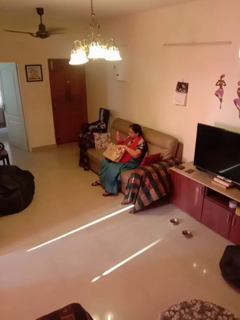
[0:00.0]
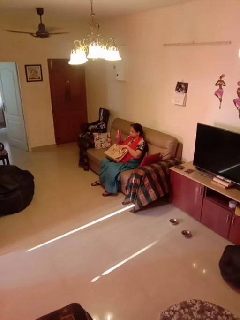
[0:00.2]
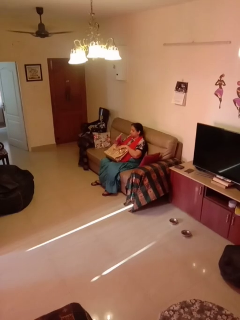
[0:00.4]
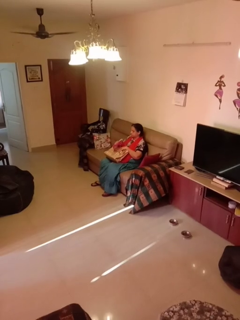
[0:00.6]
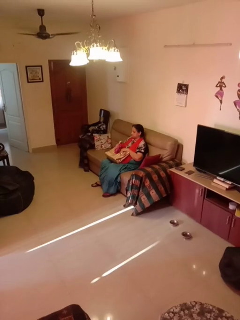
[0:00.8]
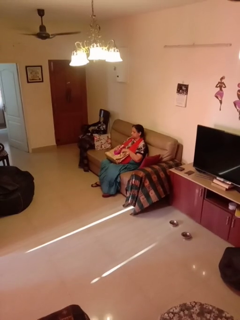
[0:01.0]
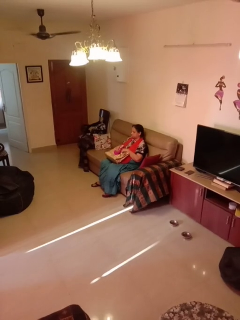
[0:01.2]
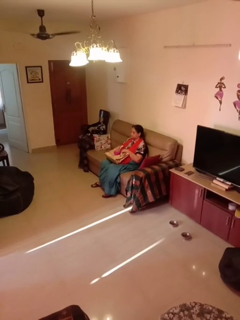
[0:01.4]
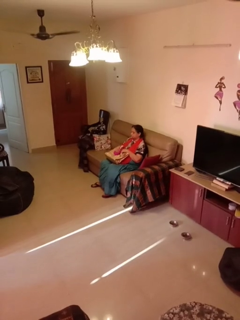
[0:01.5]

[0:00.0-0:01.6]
person takes object from purse

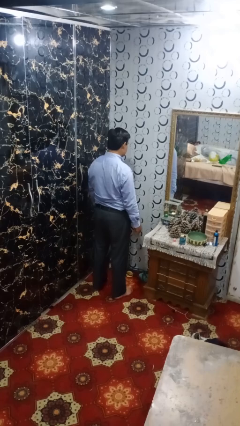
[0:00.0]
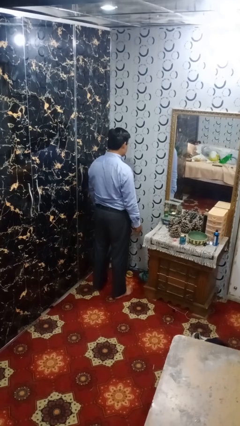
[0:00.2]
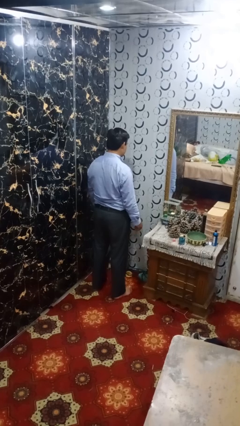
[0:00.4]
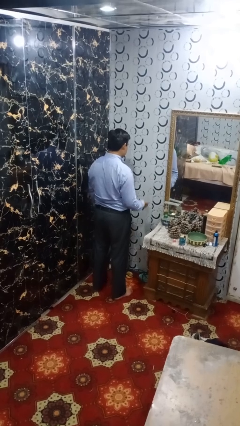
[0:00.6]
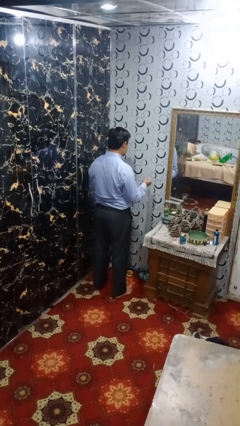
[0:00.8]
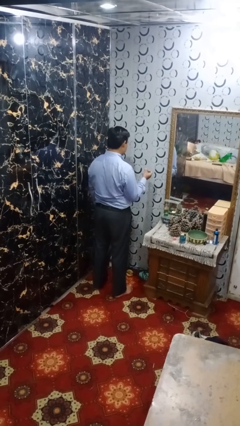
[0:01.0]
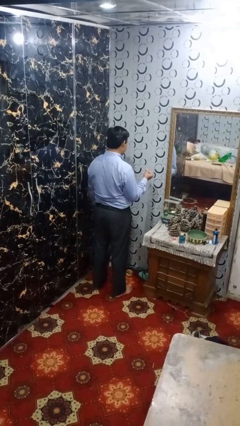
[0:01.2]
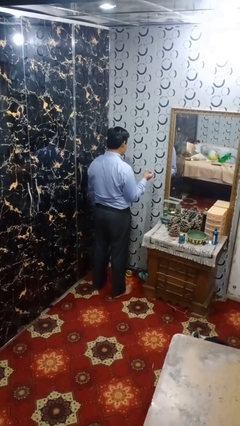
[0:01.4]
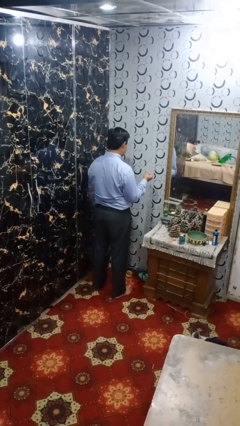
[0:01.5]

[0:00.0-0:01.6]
person snaps fingers

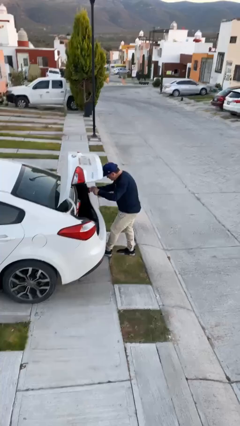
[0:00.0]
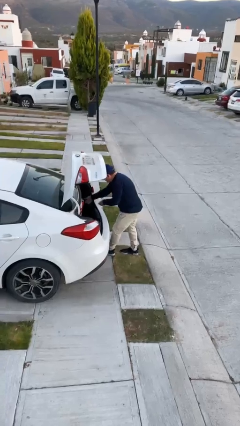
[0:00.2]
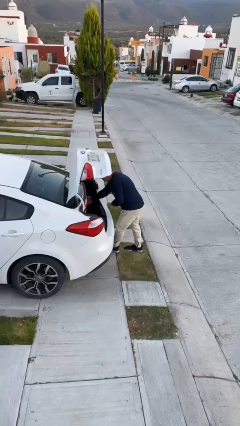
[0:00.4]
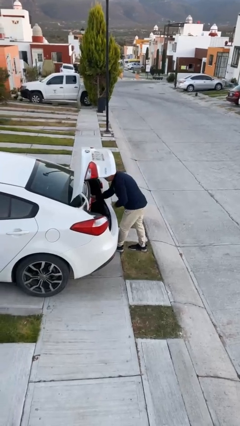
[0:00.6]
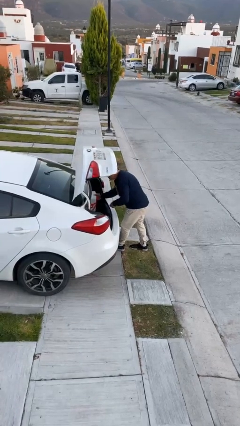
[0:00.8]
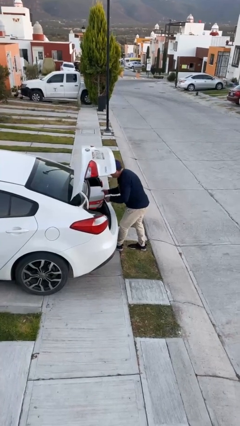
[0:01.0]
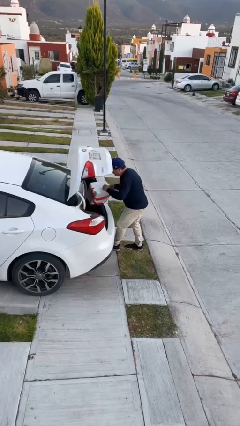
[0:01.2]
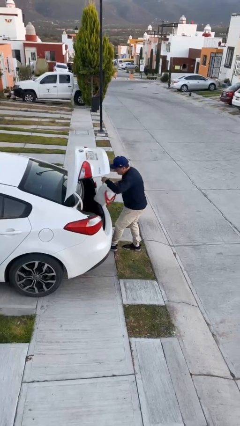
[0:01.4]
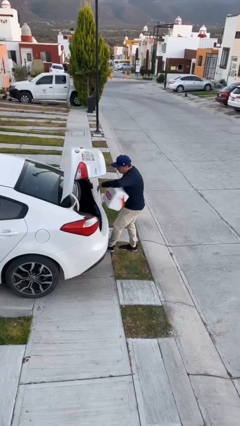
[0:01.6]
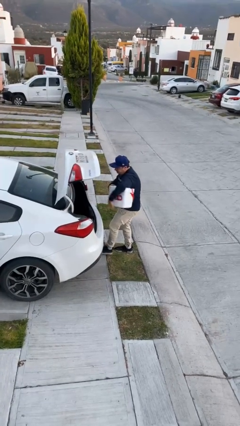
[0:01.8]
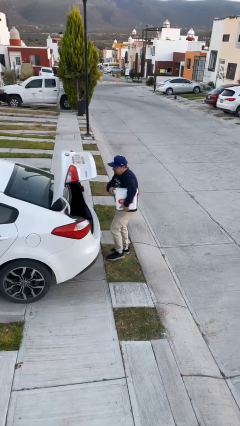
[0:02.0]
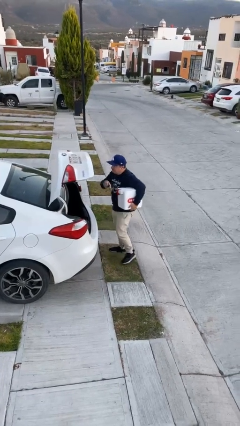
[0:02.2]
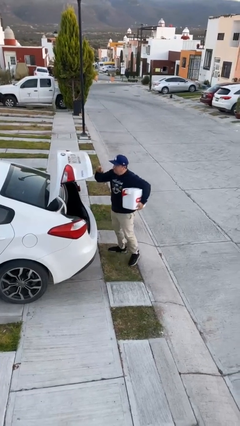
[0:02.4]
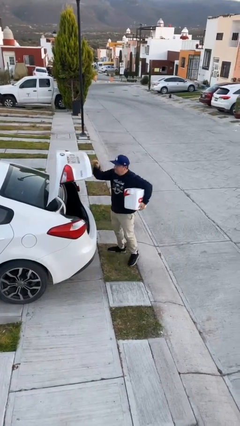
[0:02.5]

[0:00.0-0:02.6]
person unloads car

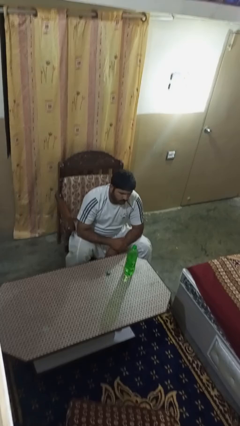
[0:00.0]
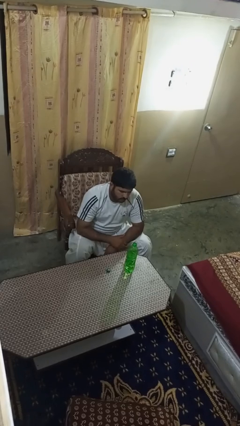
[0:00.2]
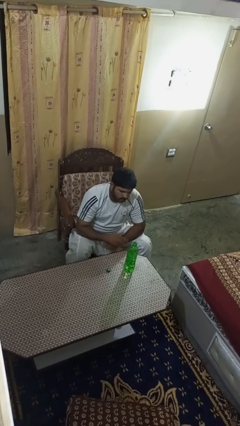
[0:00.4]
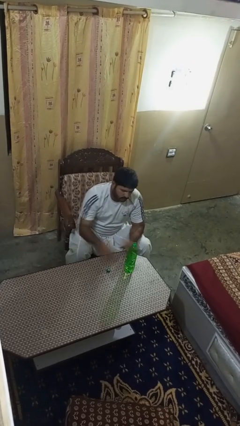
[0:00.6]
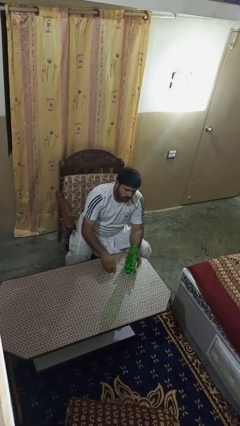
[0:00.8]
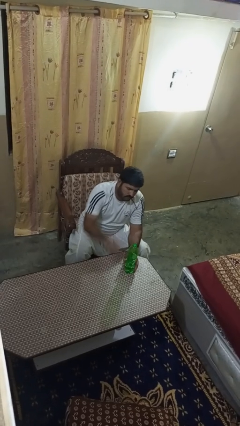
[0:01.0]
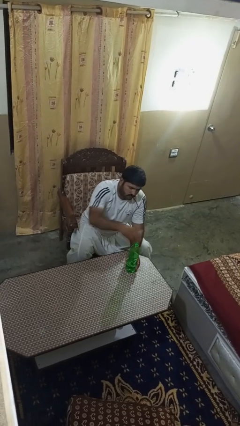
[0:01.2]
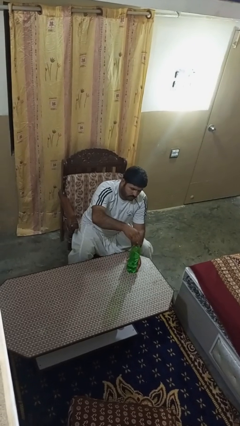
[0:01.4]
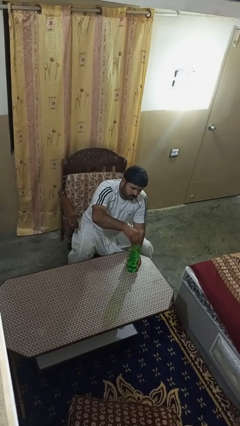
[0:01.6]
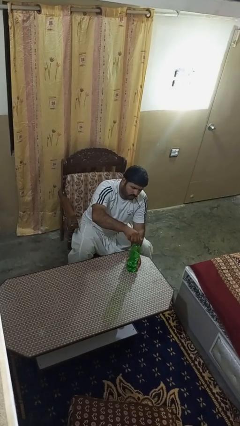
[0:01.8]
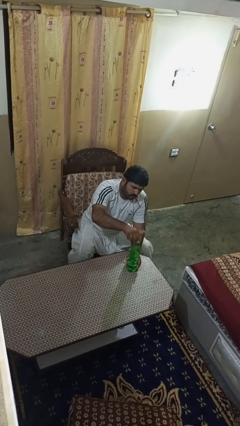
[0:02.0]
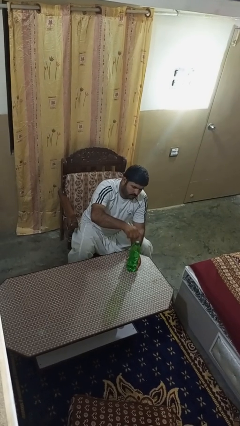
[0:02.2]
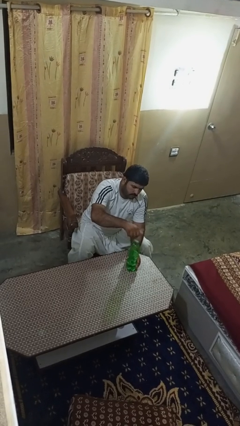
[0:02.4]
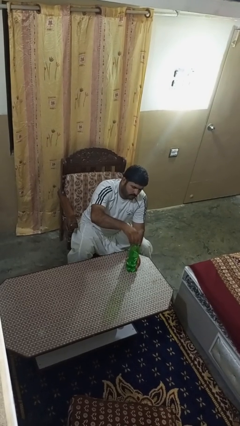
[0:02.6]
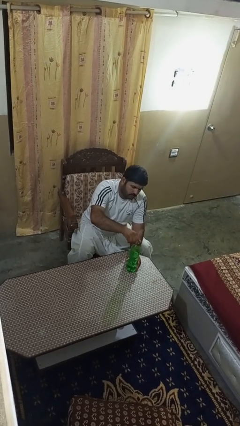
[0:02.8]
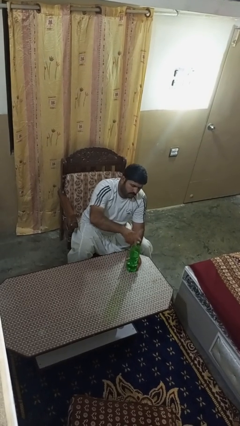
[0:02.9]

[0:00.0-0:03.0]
person screws lid to bottle

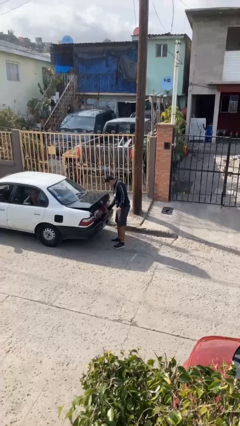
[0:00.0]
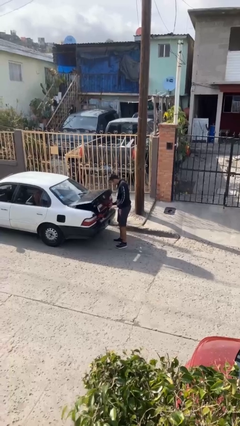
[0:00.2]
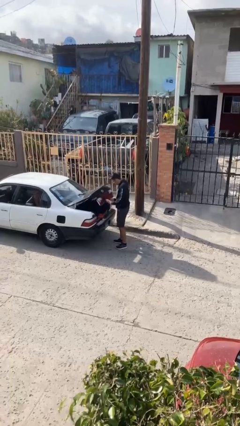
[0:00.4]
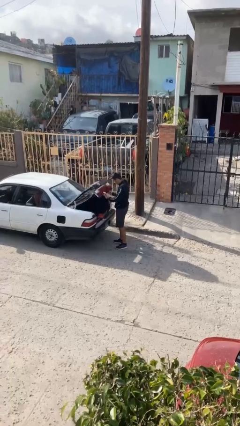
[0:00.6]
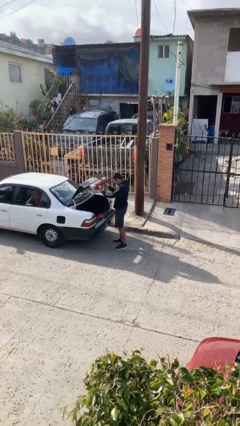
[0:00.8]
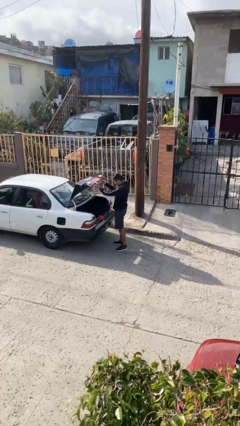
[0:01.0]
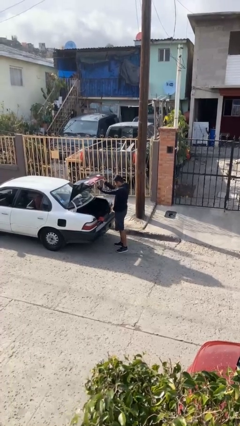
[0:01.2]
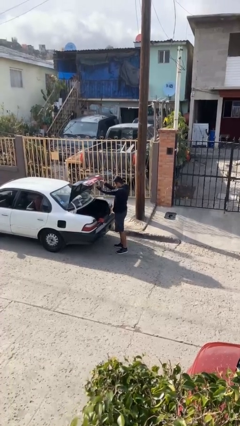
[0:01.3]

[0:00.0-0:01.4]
person opens car trunk

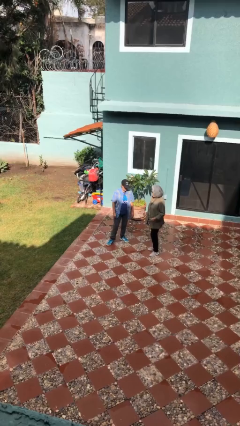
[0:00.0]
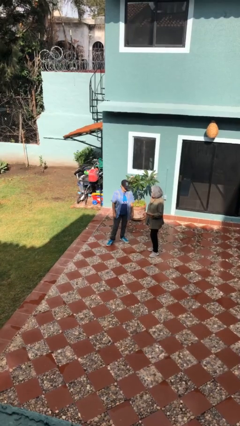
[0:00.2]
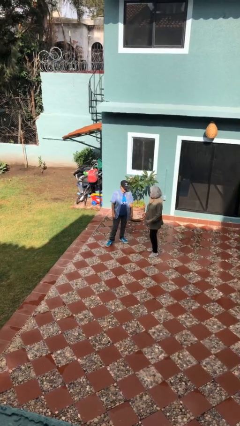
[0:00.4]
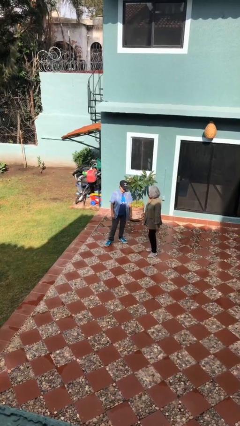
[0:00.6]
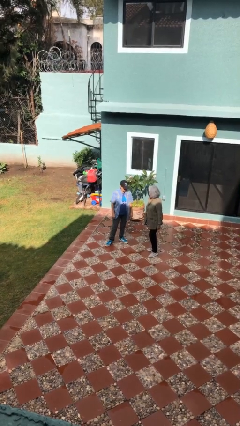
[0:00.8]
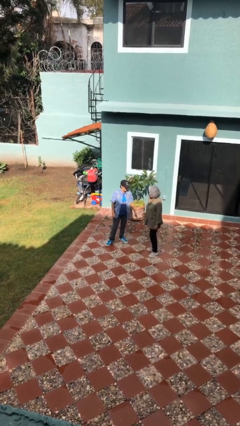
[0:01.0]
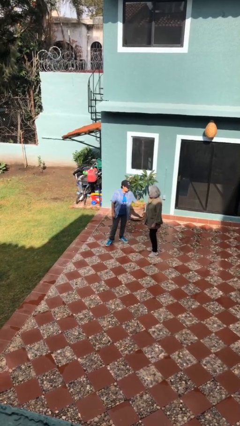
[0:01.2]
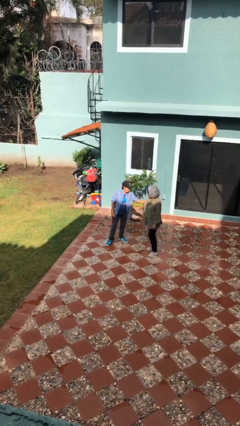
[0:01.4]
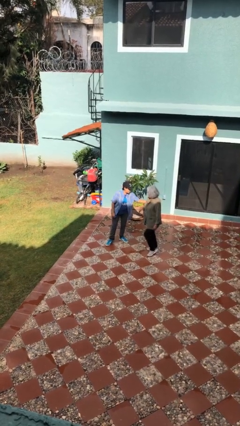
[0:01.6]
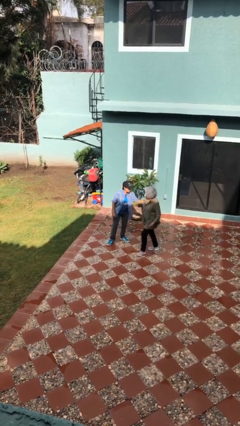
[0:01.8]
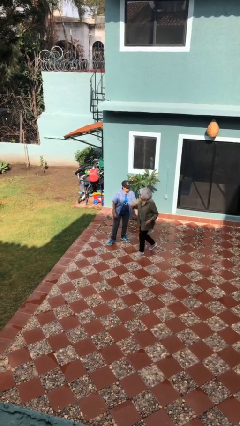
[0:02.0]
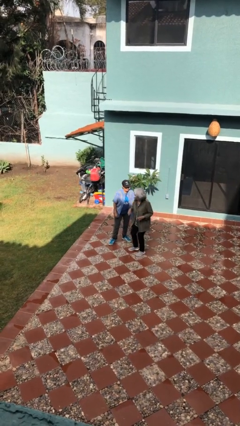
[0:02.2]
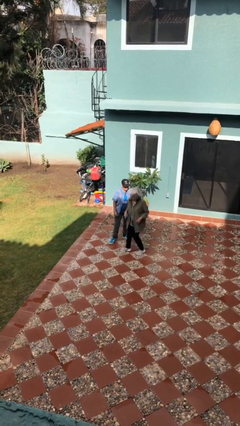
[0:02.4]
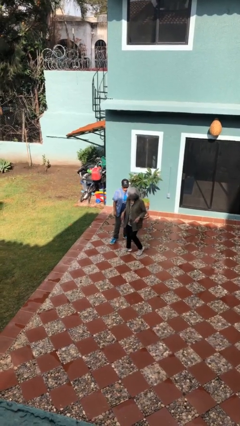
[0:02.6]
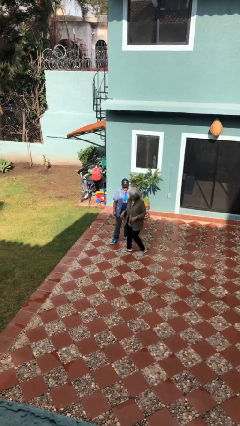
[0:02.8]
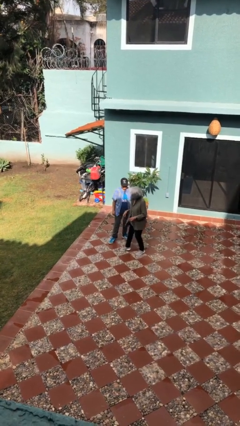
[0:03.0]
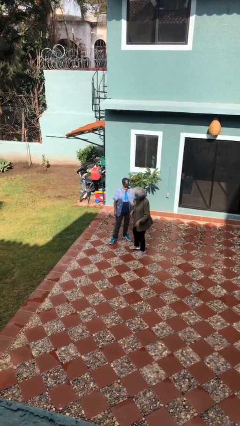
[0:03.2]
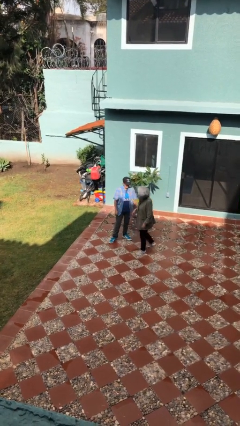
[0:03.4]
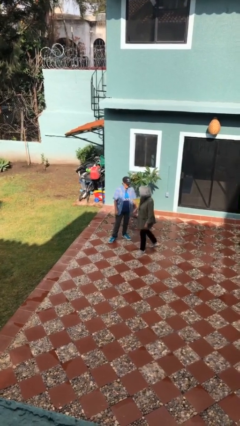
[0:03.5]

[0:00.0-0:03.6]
person grabs person by bicep

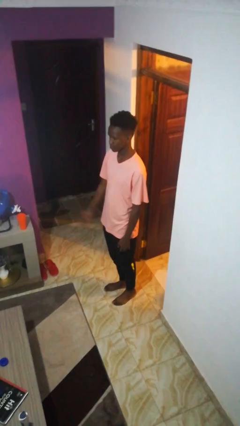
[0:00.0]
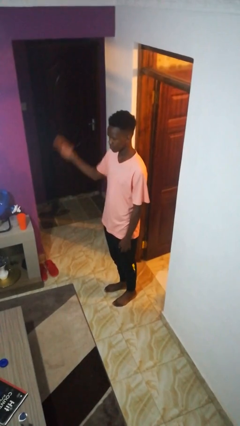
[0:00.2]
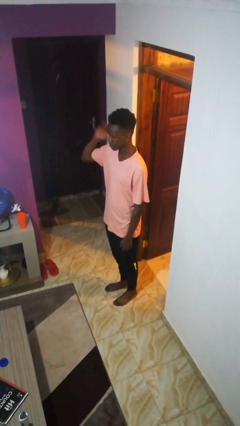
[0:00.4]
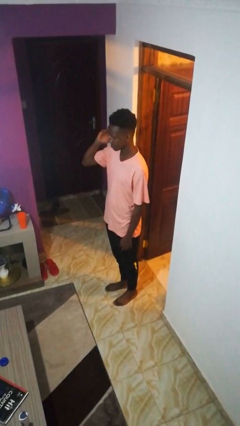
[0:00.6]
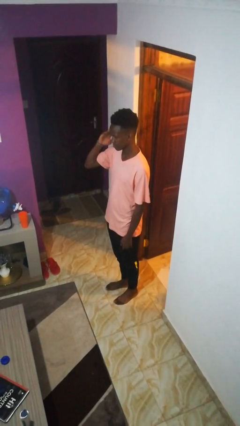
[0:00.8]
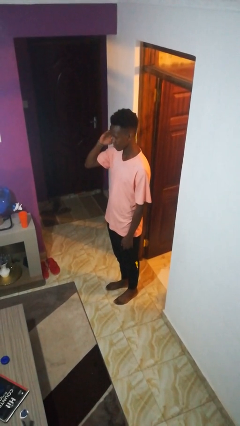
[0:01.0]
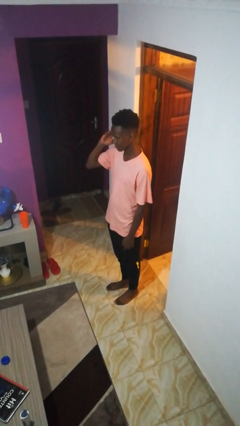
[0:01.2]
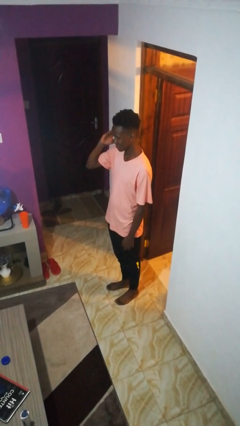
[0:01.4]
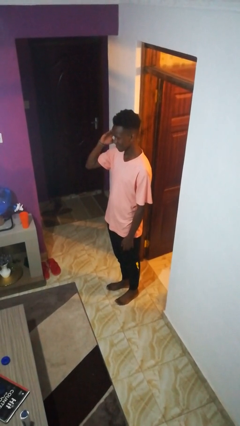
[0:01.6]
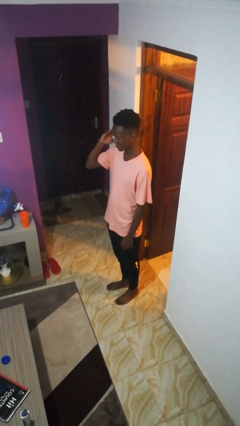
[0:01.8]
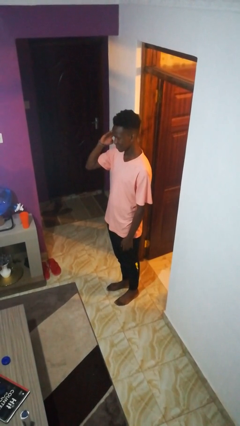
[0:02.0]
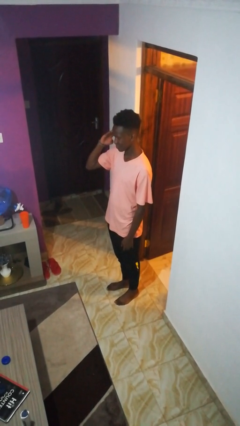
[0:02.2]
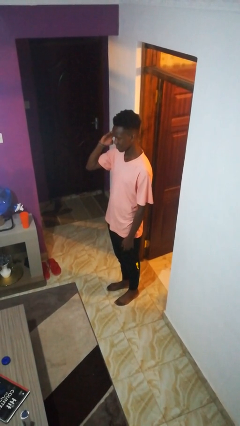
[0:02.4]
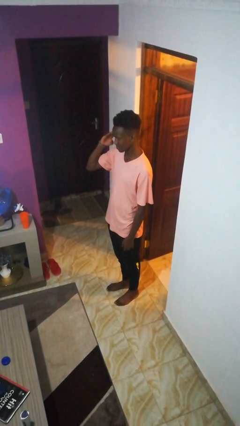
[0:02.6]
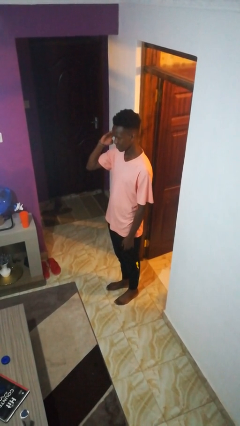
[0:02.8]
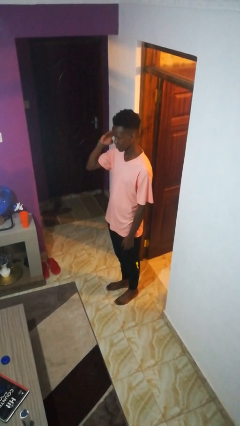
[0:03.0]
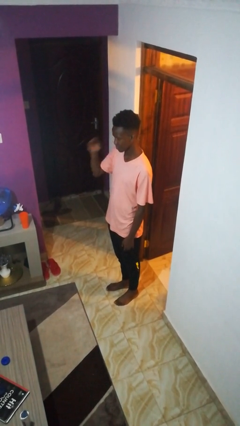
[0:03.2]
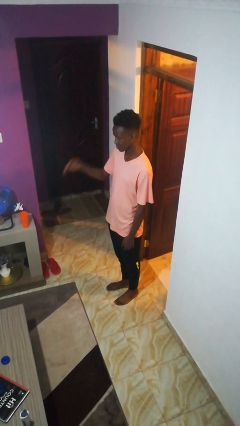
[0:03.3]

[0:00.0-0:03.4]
person salutes

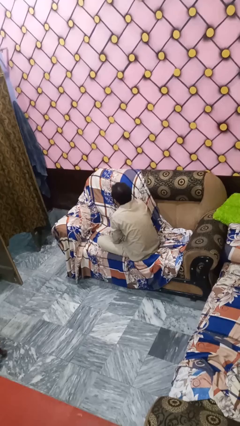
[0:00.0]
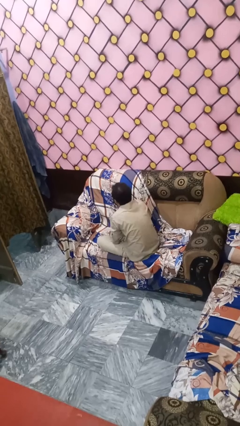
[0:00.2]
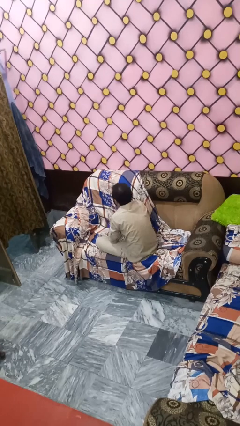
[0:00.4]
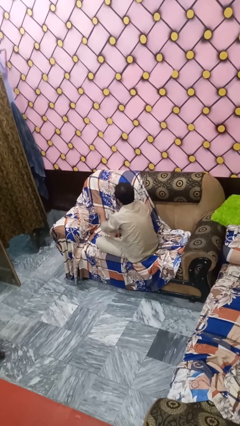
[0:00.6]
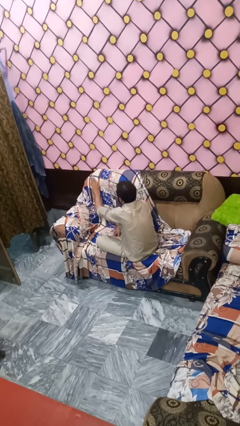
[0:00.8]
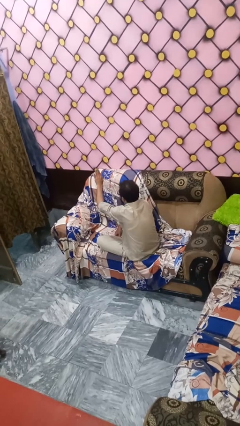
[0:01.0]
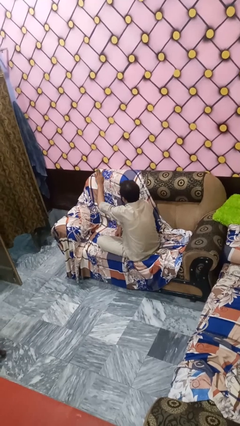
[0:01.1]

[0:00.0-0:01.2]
person gestures stop
